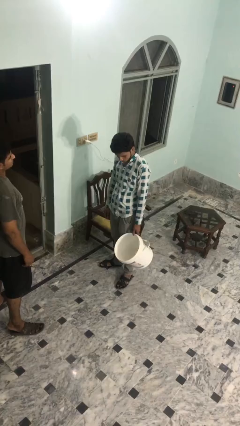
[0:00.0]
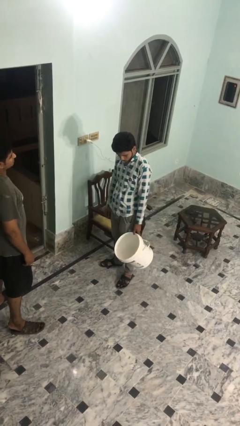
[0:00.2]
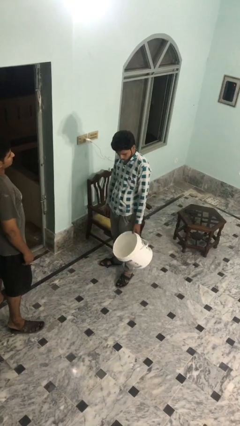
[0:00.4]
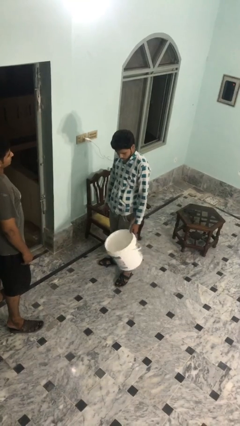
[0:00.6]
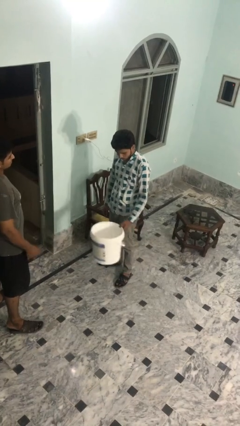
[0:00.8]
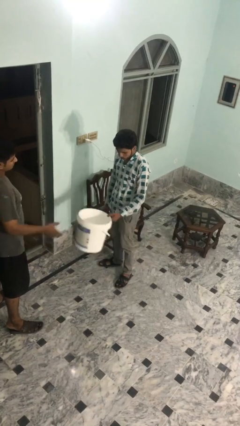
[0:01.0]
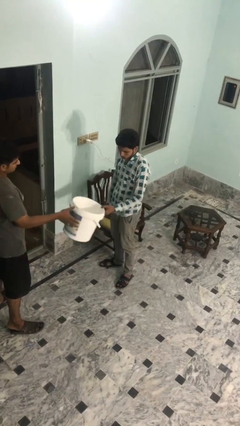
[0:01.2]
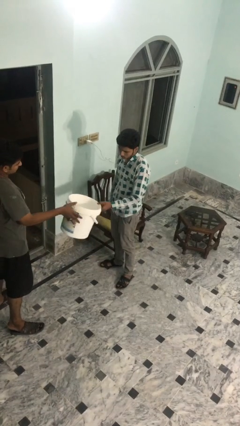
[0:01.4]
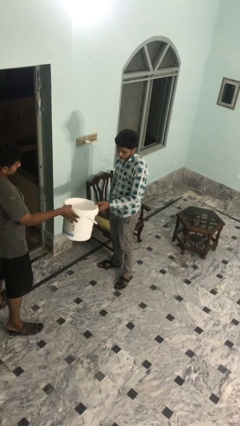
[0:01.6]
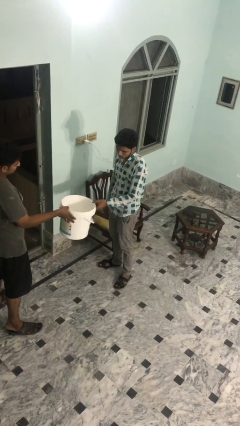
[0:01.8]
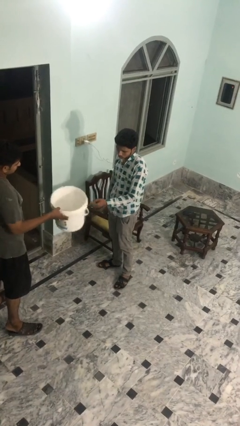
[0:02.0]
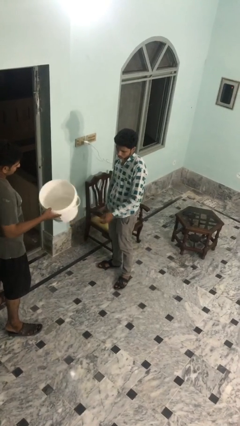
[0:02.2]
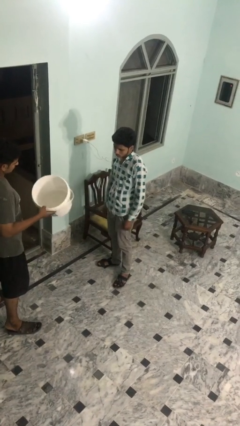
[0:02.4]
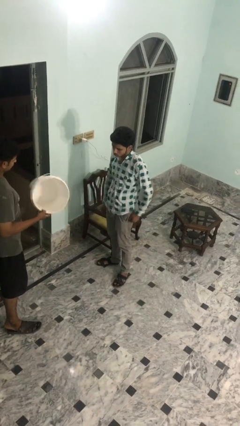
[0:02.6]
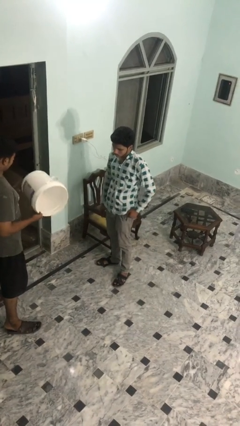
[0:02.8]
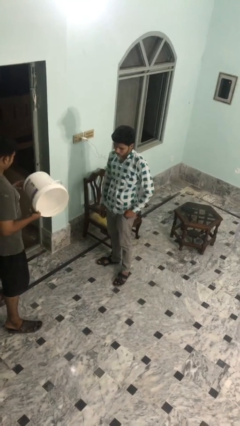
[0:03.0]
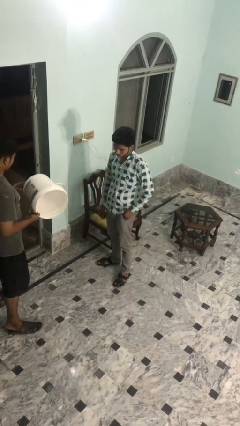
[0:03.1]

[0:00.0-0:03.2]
person transfers object to person

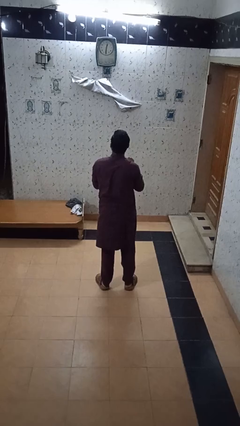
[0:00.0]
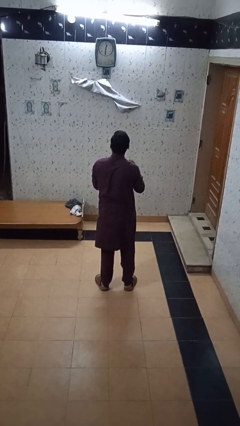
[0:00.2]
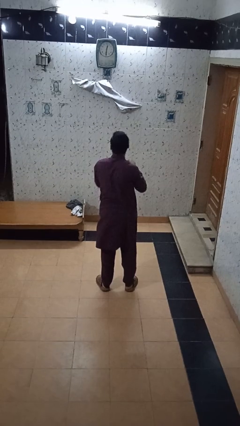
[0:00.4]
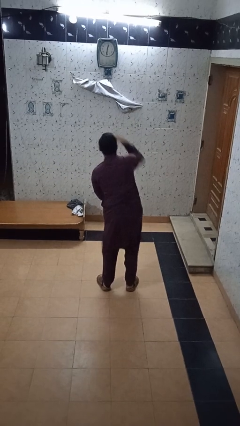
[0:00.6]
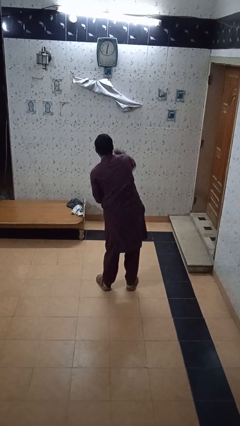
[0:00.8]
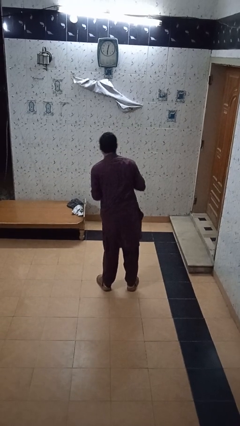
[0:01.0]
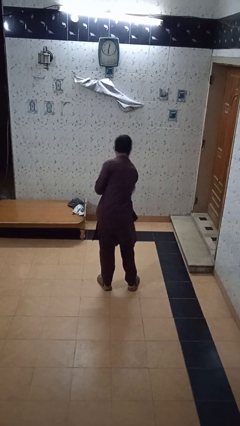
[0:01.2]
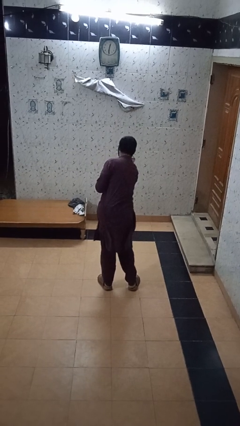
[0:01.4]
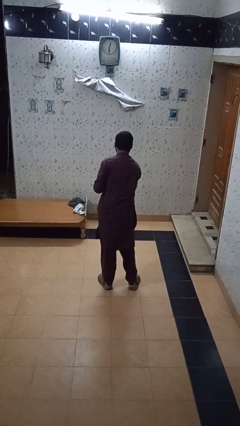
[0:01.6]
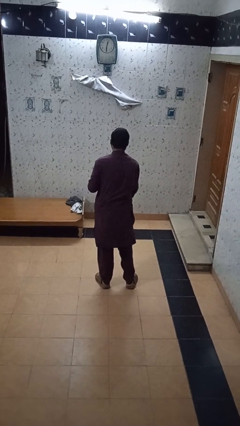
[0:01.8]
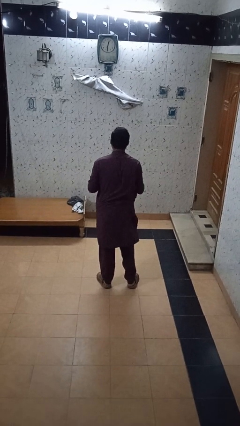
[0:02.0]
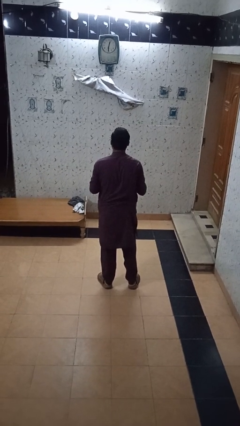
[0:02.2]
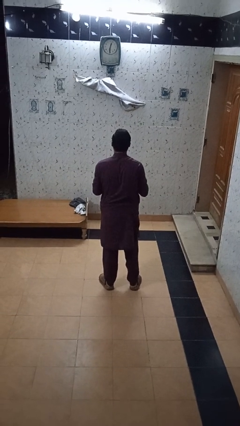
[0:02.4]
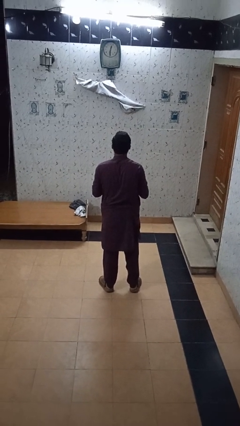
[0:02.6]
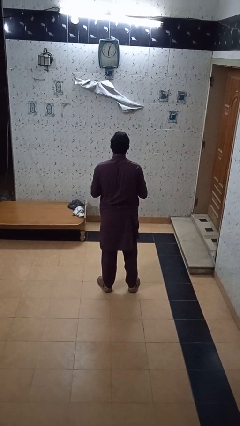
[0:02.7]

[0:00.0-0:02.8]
person punches

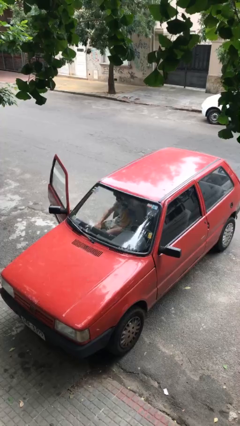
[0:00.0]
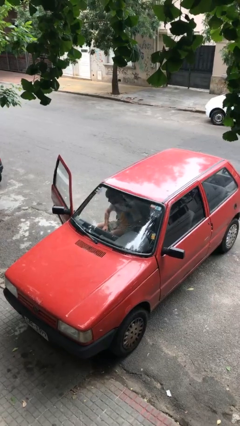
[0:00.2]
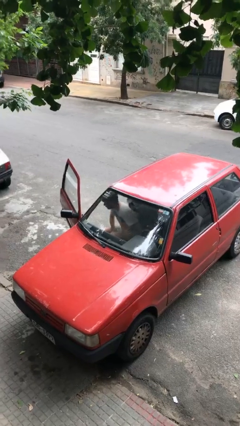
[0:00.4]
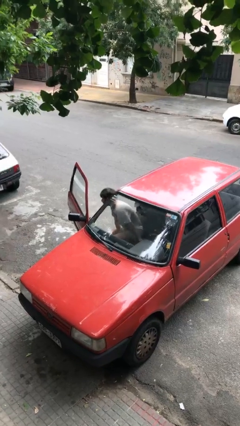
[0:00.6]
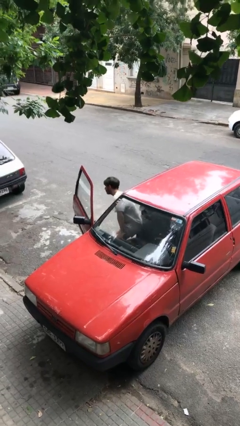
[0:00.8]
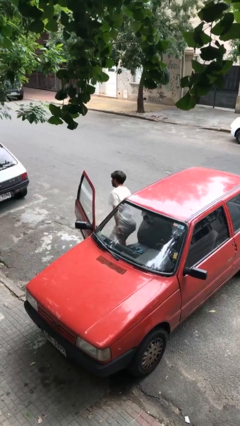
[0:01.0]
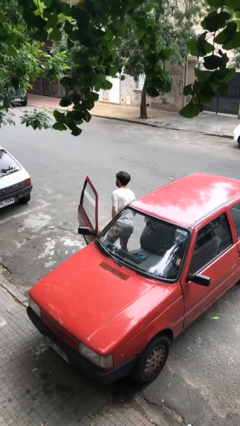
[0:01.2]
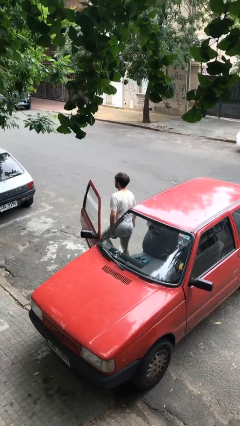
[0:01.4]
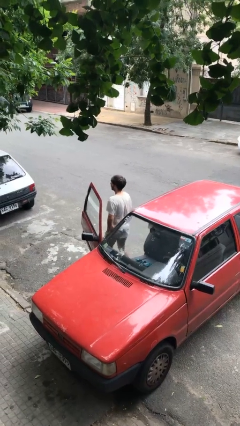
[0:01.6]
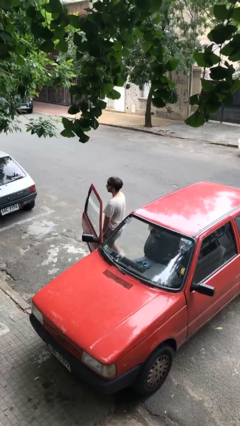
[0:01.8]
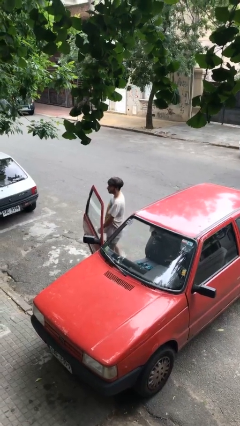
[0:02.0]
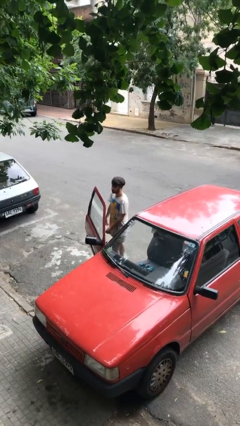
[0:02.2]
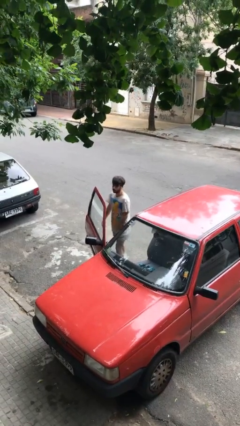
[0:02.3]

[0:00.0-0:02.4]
person exits car

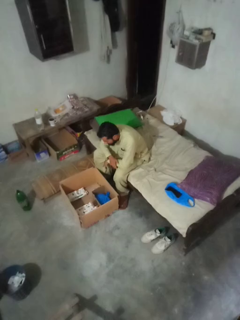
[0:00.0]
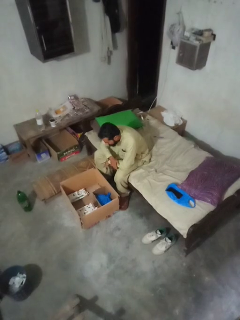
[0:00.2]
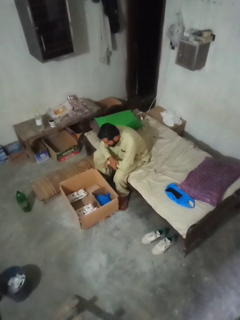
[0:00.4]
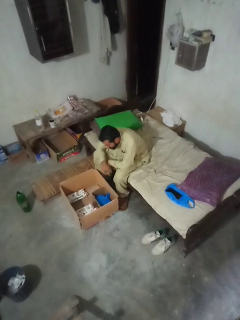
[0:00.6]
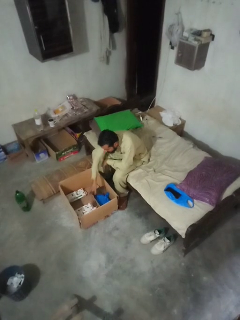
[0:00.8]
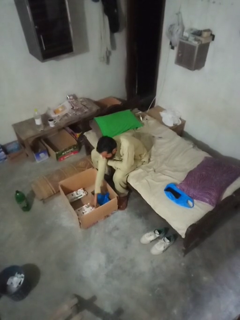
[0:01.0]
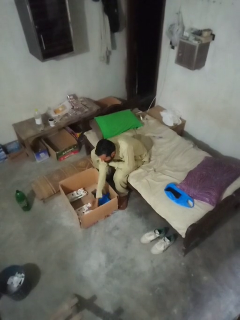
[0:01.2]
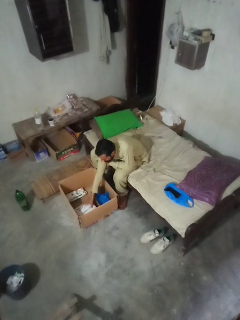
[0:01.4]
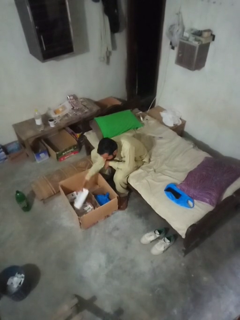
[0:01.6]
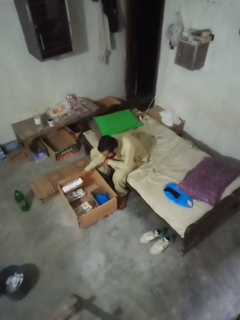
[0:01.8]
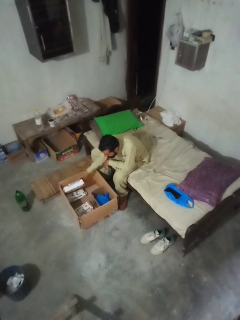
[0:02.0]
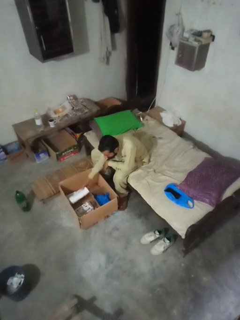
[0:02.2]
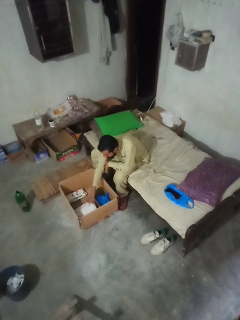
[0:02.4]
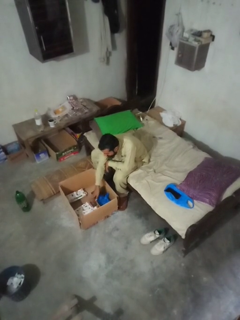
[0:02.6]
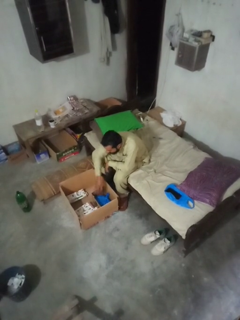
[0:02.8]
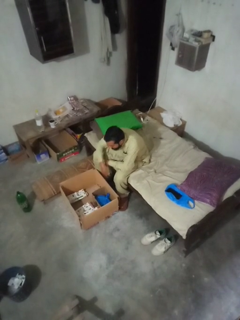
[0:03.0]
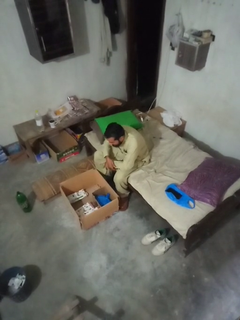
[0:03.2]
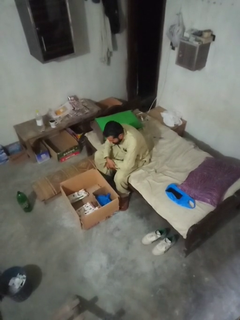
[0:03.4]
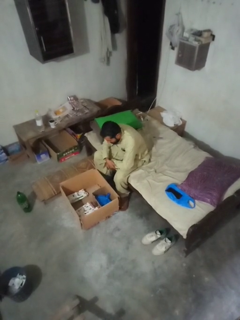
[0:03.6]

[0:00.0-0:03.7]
person searches in box

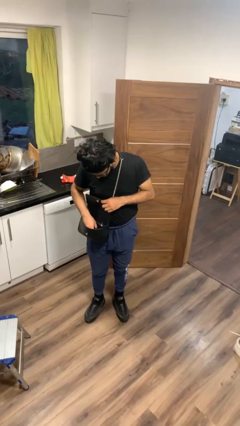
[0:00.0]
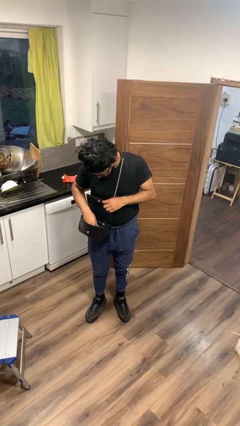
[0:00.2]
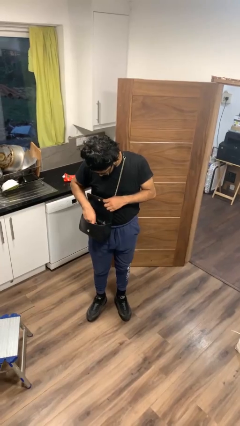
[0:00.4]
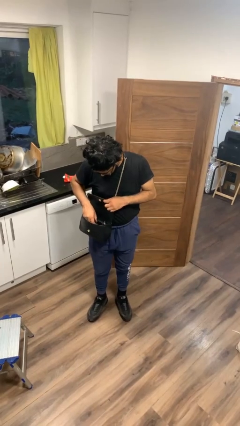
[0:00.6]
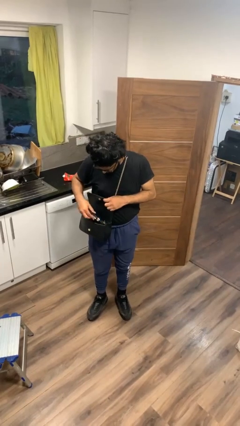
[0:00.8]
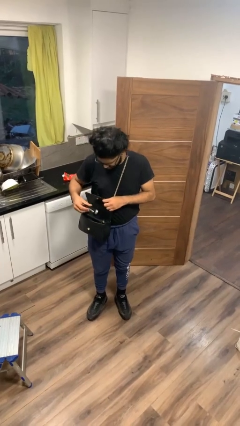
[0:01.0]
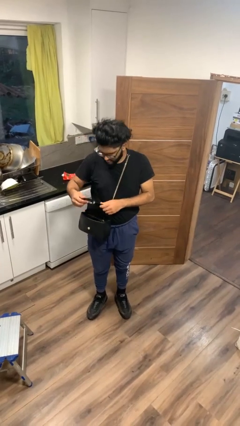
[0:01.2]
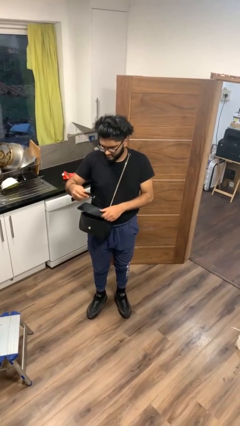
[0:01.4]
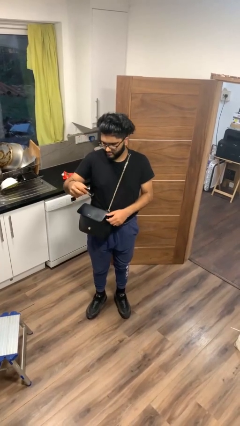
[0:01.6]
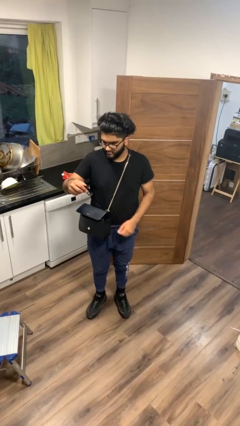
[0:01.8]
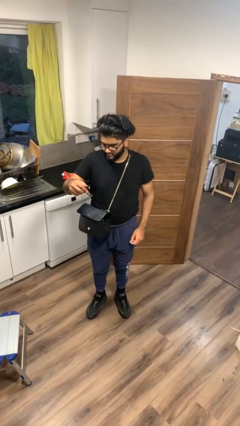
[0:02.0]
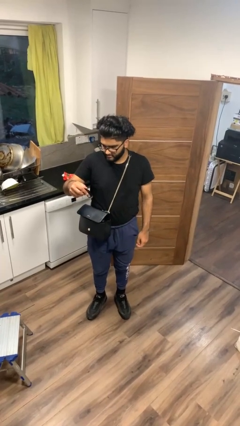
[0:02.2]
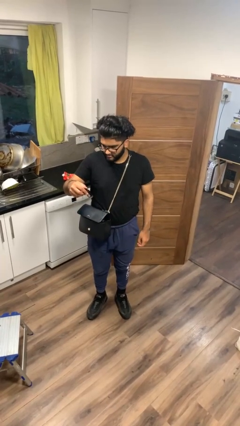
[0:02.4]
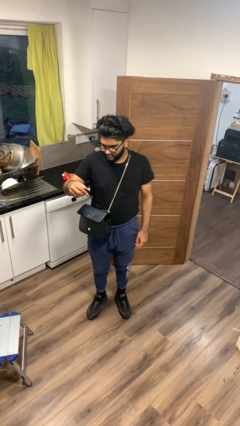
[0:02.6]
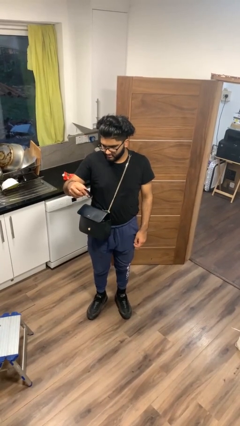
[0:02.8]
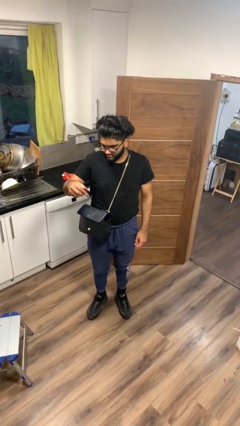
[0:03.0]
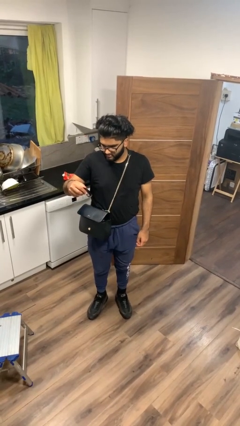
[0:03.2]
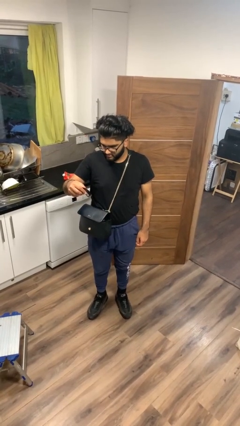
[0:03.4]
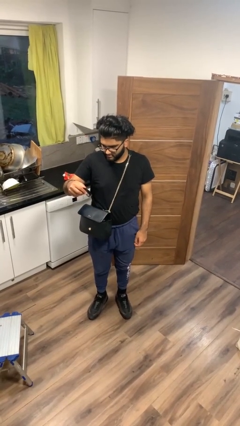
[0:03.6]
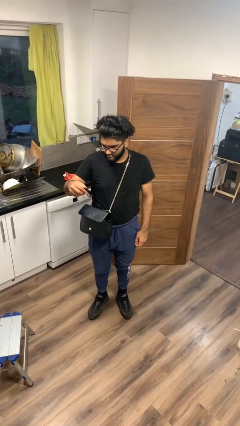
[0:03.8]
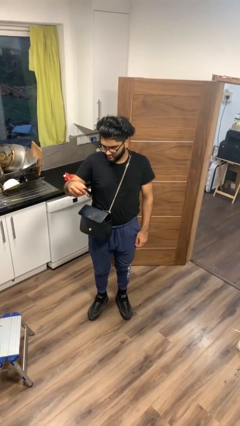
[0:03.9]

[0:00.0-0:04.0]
person takes object from purse

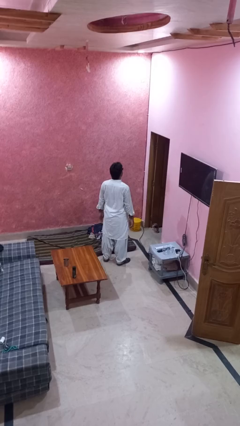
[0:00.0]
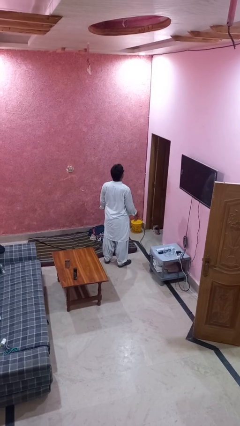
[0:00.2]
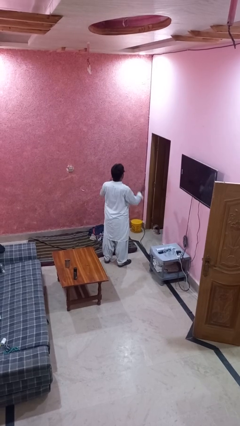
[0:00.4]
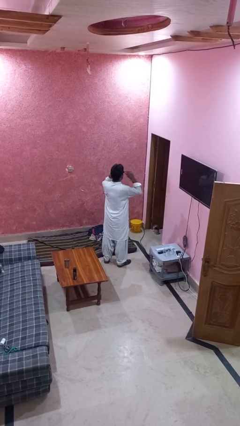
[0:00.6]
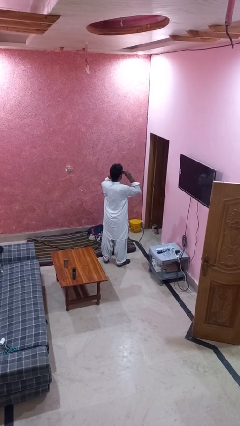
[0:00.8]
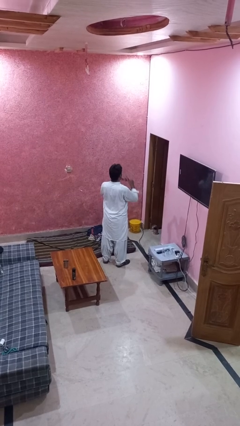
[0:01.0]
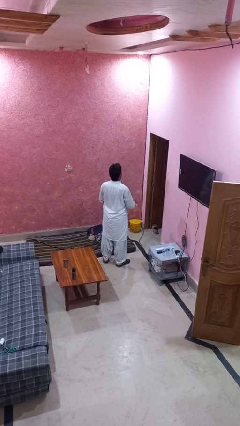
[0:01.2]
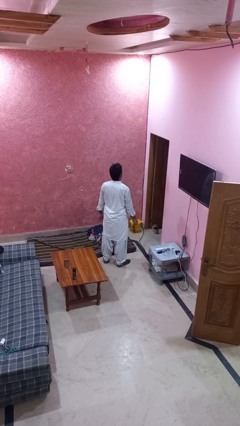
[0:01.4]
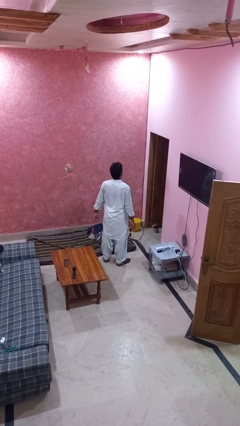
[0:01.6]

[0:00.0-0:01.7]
person takes off sunglasses

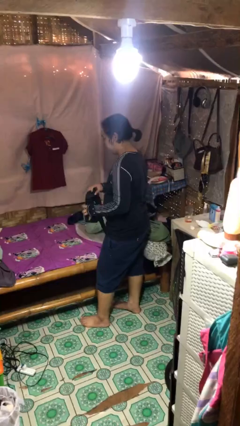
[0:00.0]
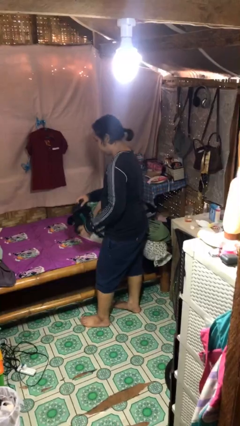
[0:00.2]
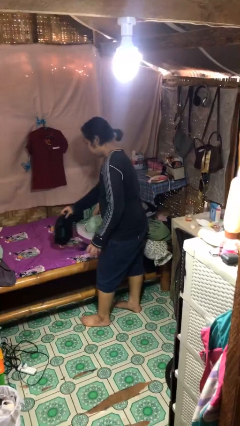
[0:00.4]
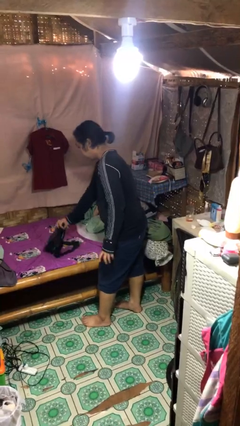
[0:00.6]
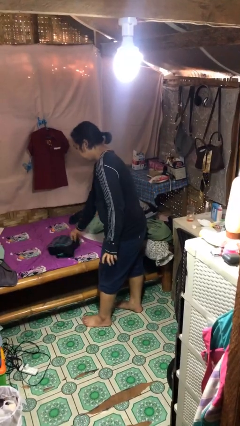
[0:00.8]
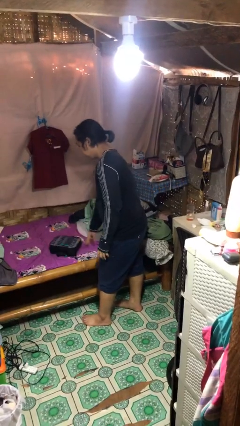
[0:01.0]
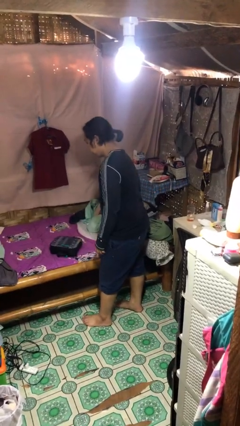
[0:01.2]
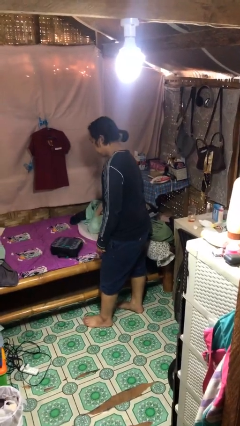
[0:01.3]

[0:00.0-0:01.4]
person puts down object on bed
